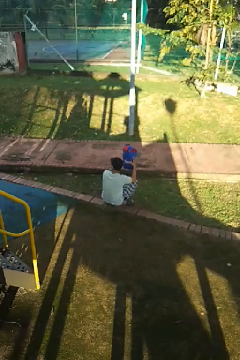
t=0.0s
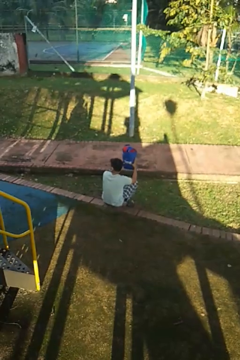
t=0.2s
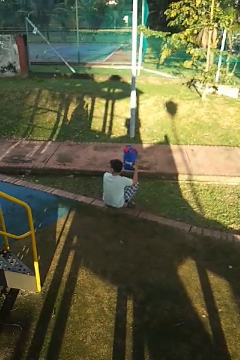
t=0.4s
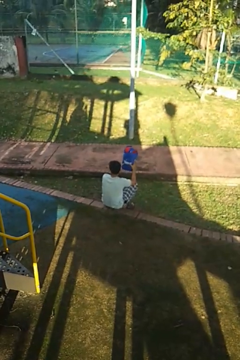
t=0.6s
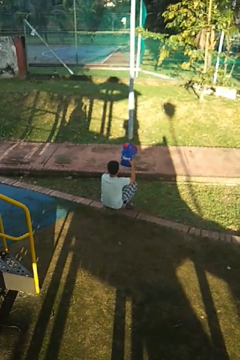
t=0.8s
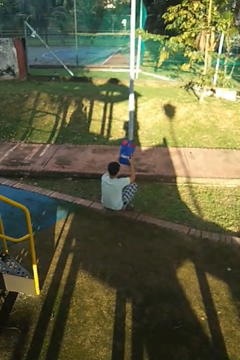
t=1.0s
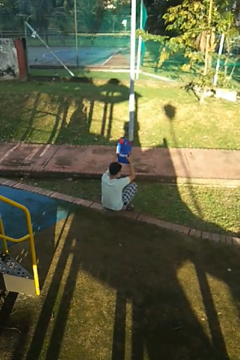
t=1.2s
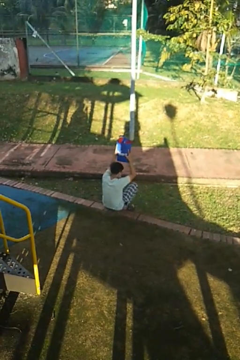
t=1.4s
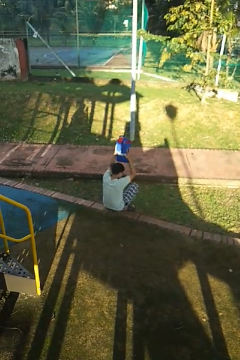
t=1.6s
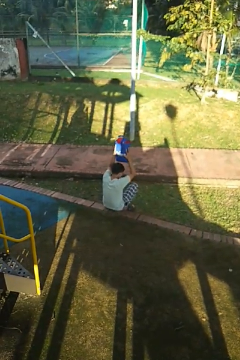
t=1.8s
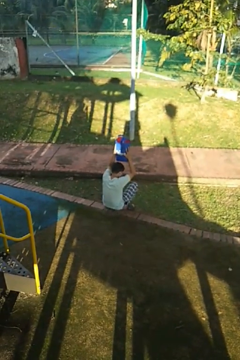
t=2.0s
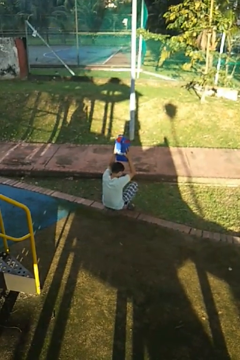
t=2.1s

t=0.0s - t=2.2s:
person holds object above head

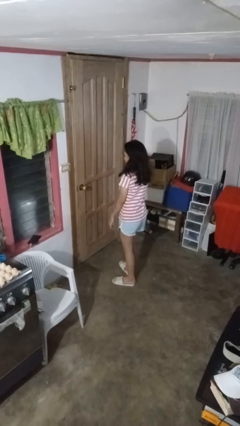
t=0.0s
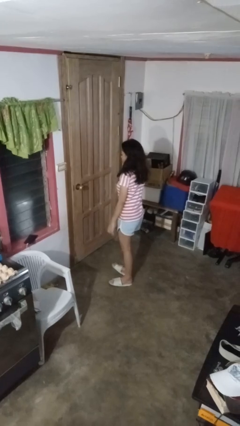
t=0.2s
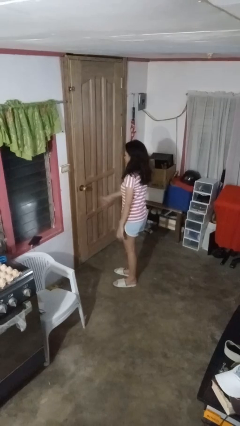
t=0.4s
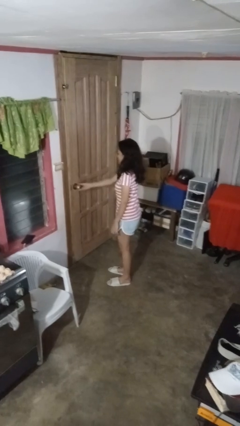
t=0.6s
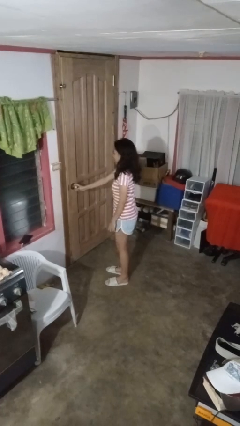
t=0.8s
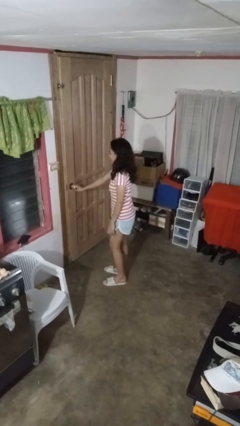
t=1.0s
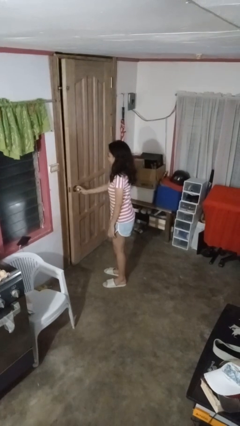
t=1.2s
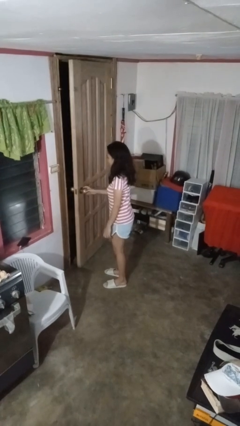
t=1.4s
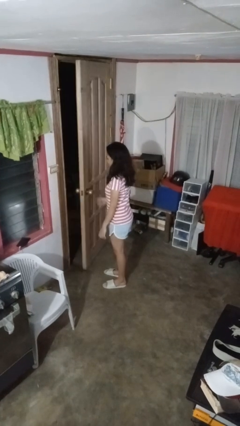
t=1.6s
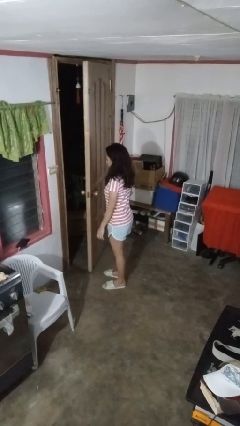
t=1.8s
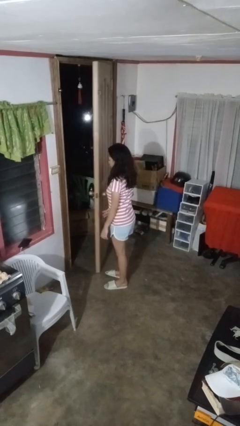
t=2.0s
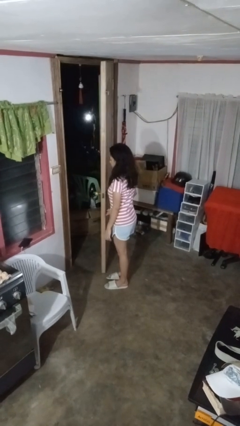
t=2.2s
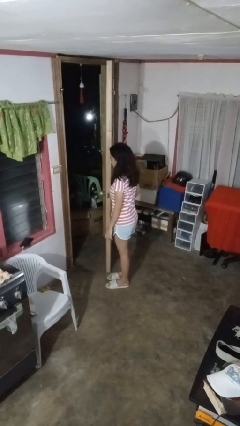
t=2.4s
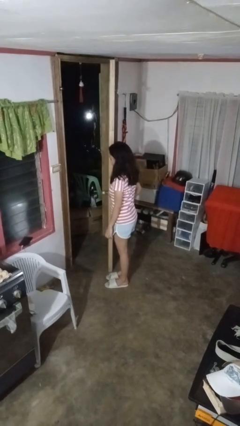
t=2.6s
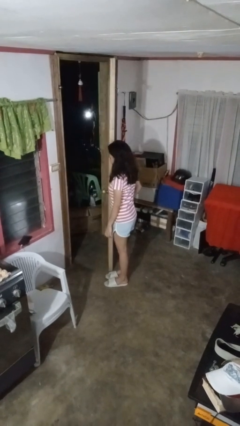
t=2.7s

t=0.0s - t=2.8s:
person opens facility door

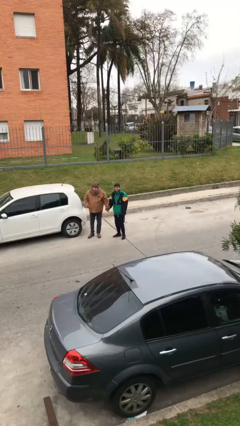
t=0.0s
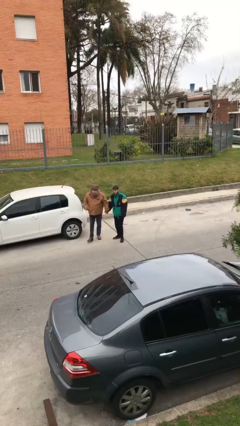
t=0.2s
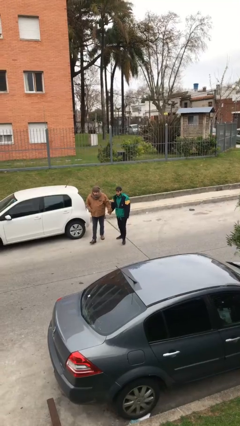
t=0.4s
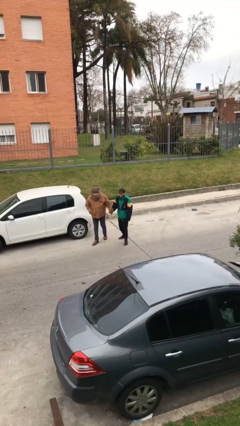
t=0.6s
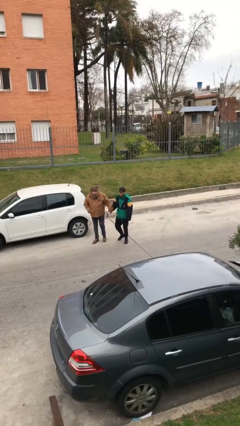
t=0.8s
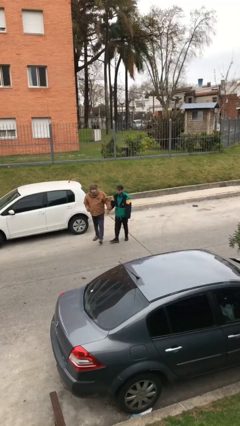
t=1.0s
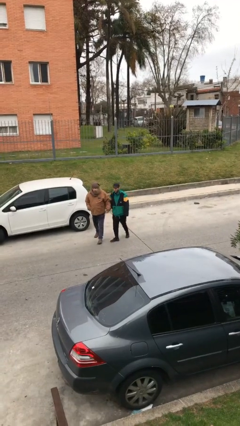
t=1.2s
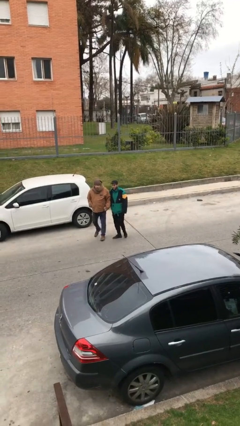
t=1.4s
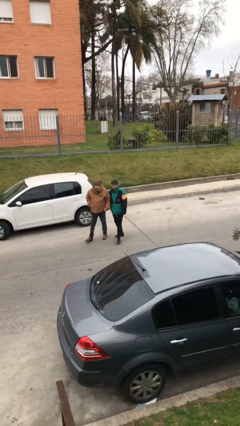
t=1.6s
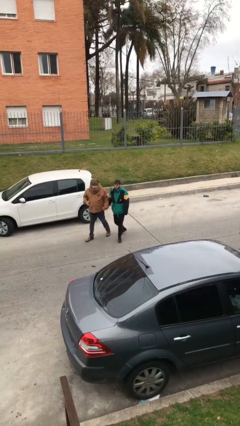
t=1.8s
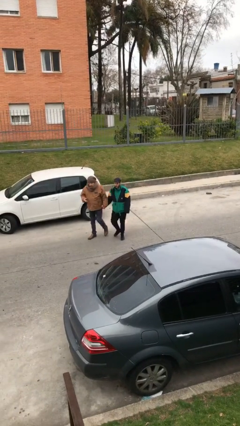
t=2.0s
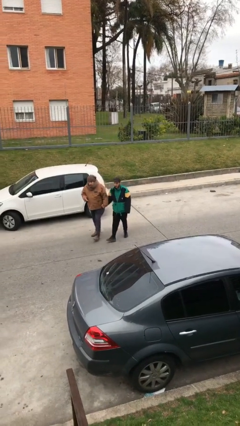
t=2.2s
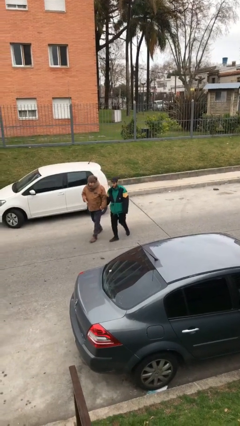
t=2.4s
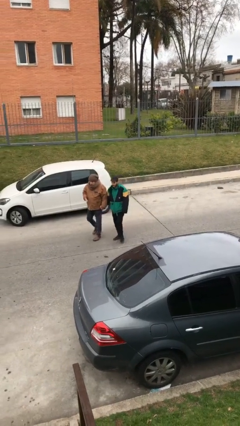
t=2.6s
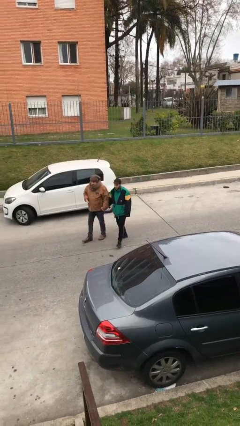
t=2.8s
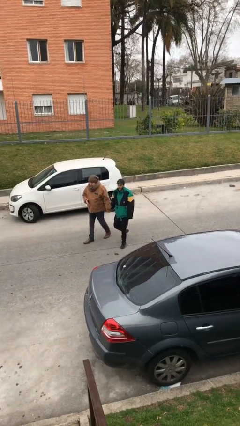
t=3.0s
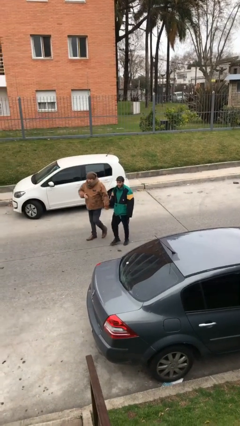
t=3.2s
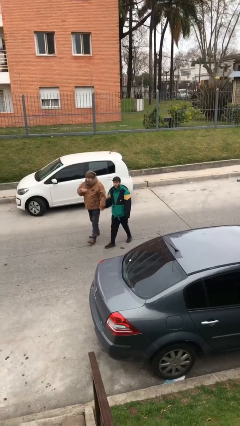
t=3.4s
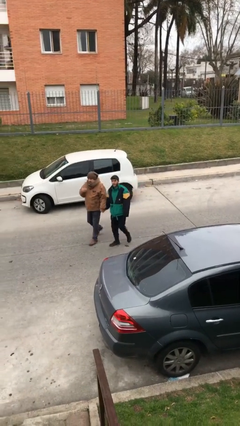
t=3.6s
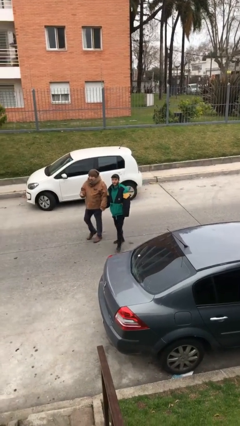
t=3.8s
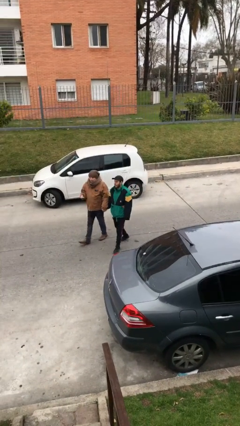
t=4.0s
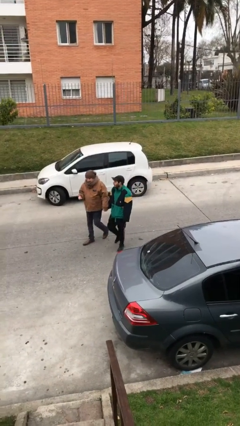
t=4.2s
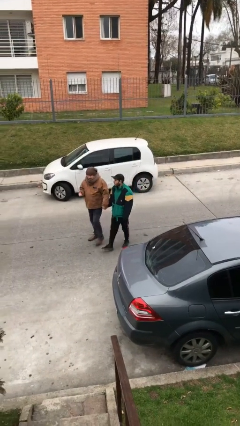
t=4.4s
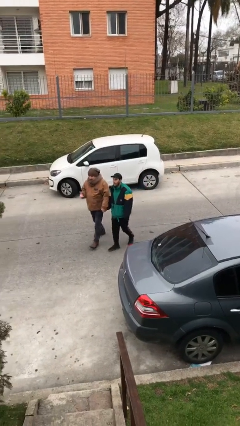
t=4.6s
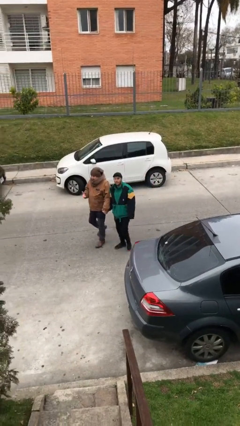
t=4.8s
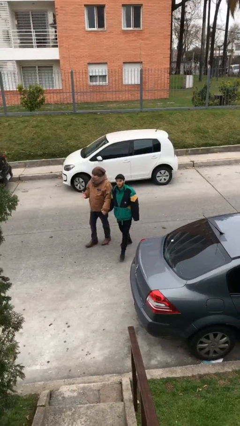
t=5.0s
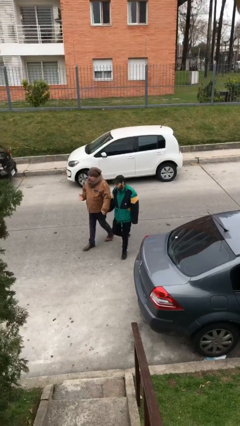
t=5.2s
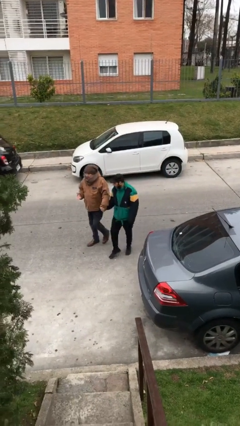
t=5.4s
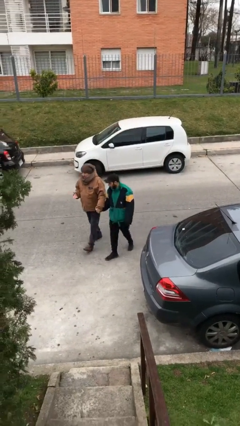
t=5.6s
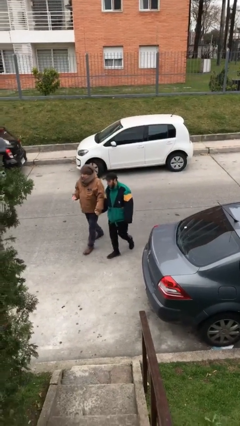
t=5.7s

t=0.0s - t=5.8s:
person holds hand

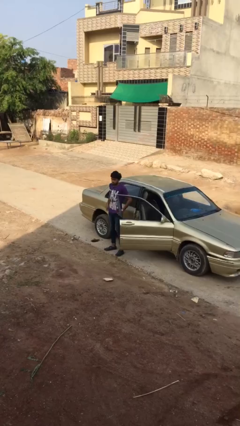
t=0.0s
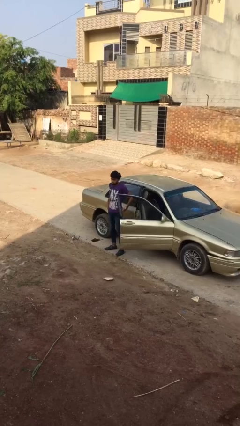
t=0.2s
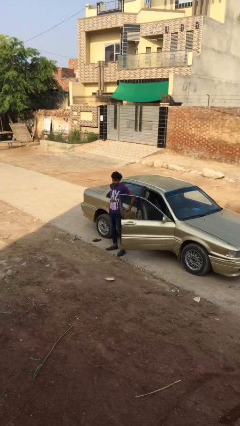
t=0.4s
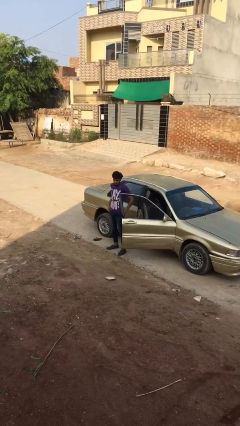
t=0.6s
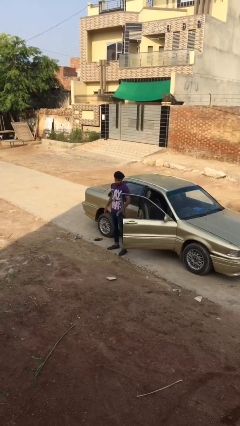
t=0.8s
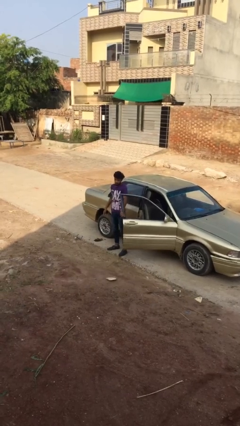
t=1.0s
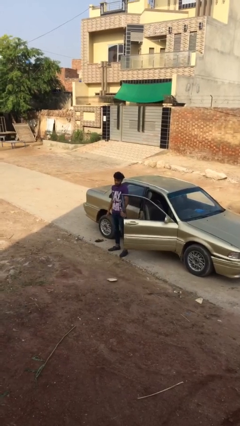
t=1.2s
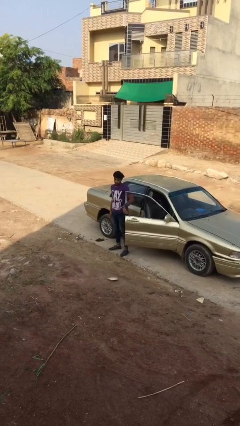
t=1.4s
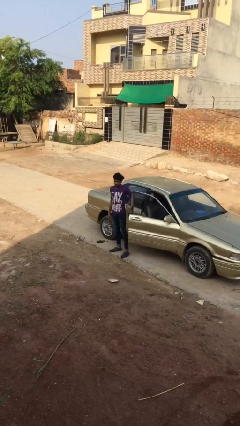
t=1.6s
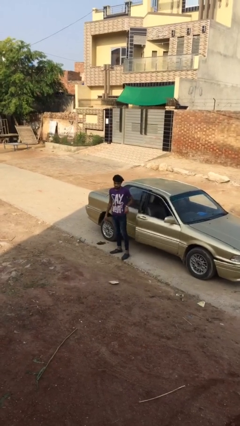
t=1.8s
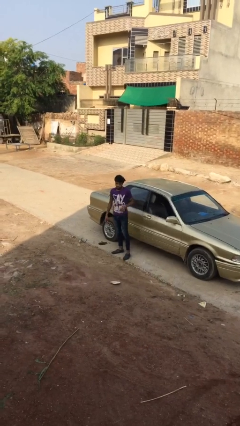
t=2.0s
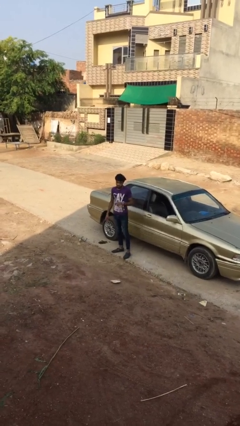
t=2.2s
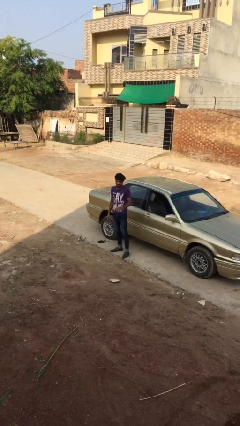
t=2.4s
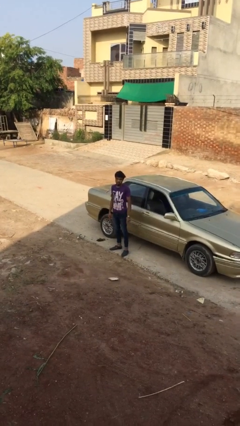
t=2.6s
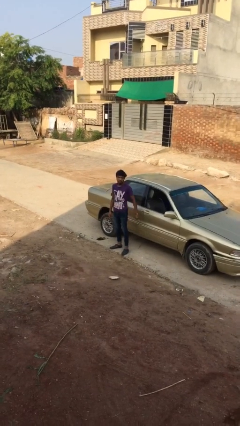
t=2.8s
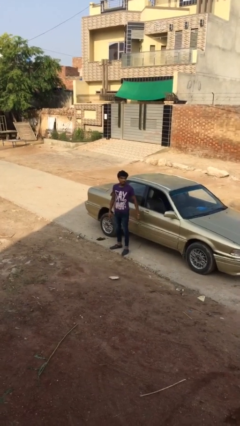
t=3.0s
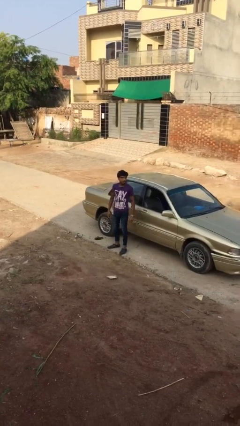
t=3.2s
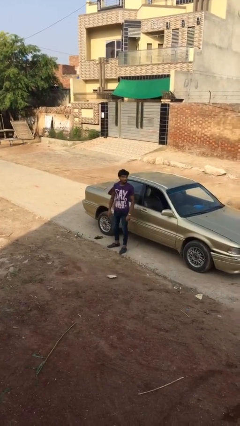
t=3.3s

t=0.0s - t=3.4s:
person closes car door

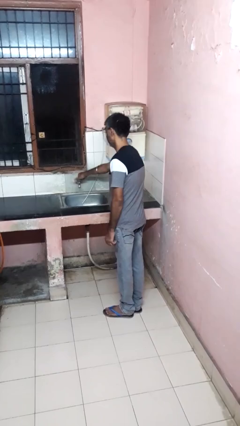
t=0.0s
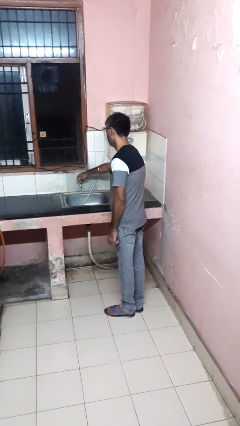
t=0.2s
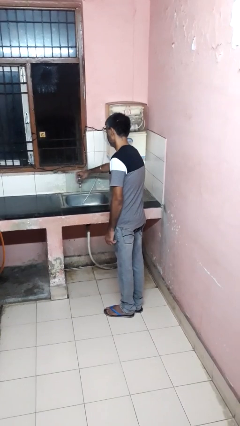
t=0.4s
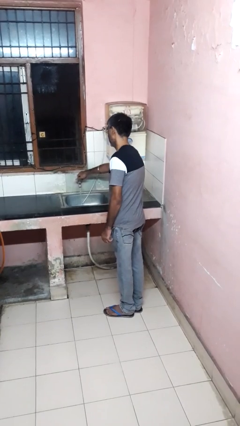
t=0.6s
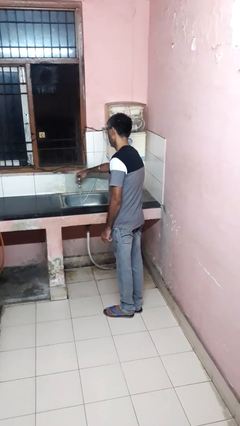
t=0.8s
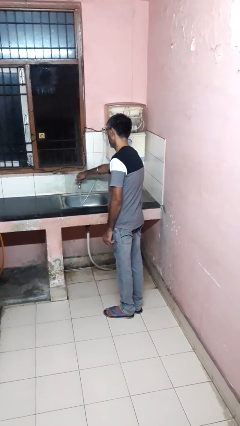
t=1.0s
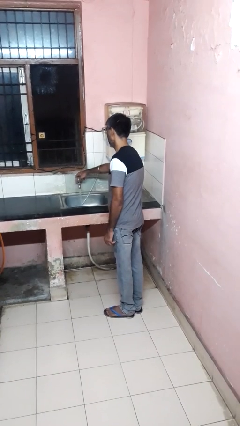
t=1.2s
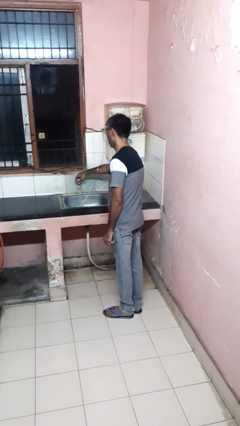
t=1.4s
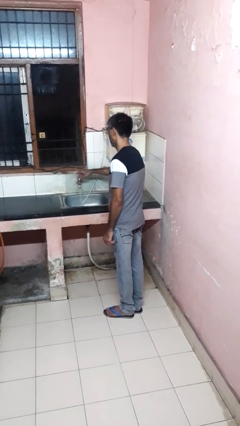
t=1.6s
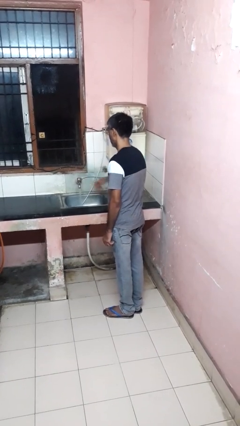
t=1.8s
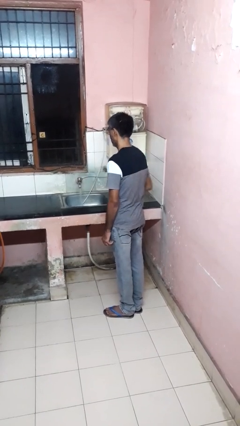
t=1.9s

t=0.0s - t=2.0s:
person turns on faucet

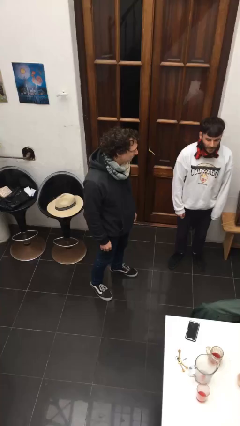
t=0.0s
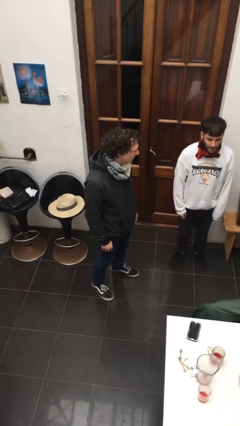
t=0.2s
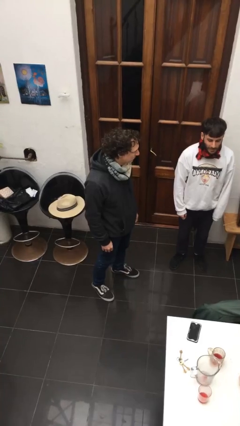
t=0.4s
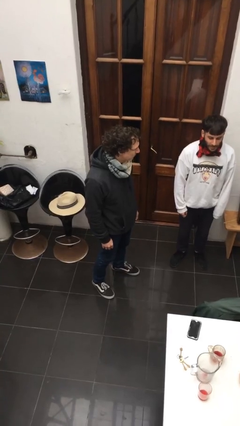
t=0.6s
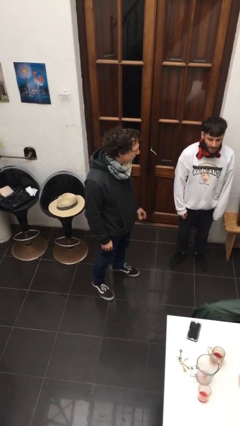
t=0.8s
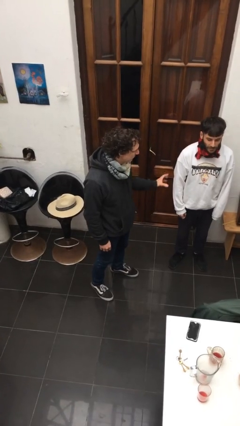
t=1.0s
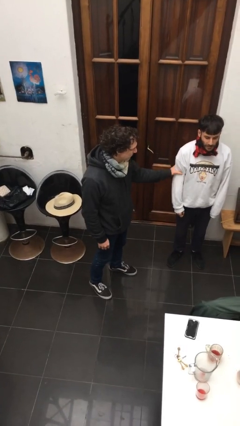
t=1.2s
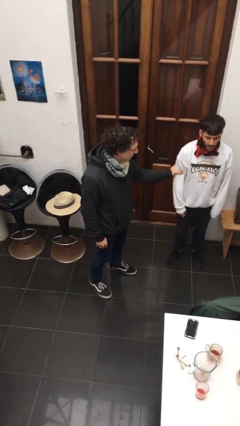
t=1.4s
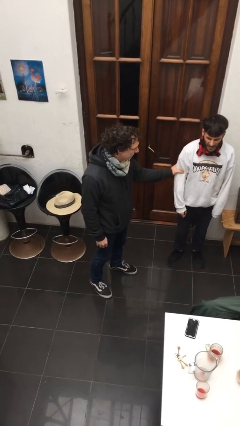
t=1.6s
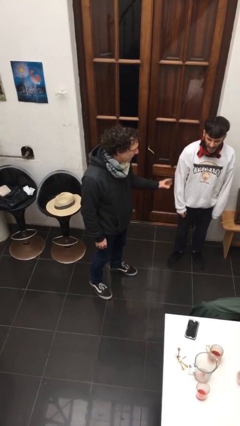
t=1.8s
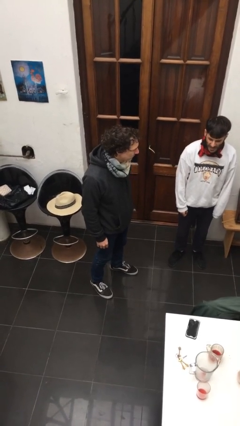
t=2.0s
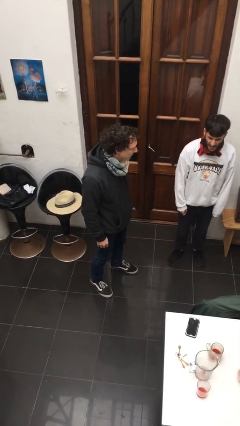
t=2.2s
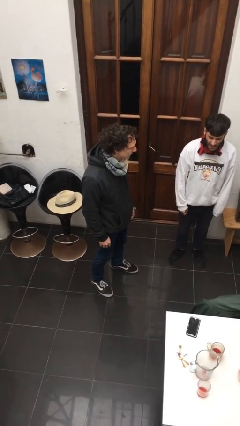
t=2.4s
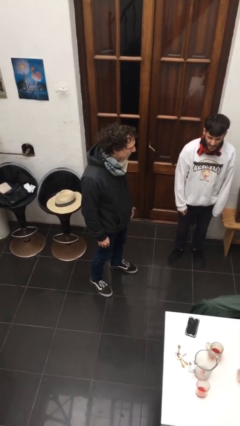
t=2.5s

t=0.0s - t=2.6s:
person grabs person by bicep
